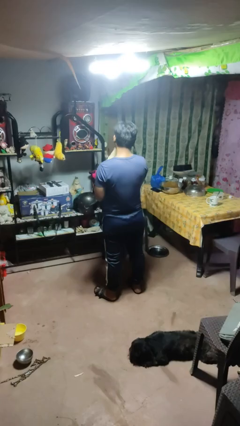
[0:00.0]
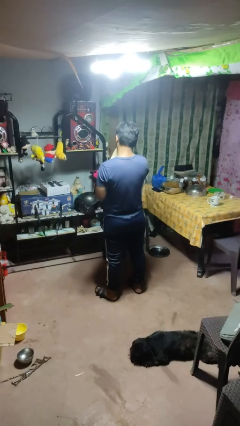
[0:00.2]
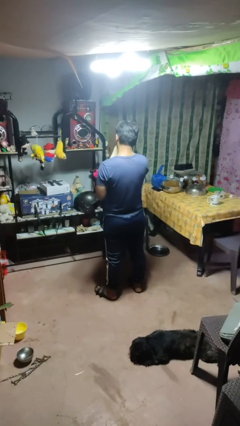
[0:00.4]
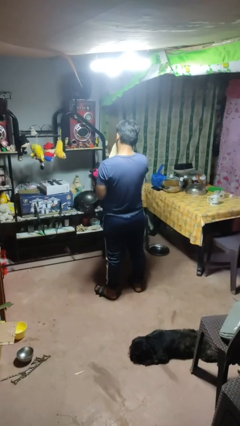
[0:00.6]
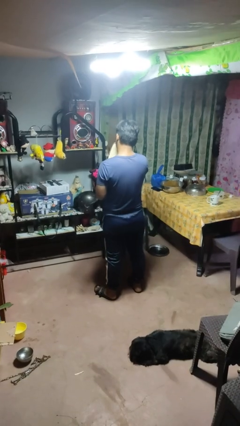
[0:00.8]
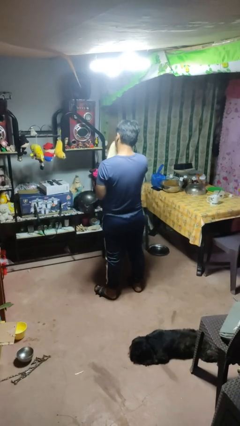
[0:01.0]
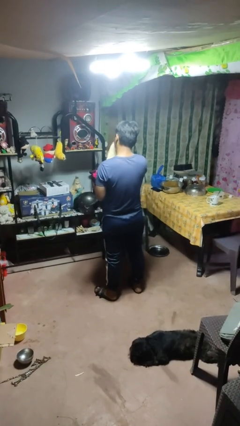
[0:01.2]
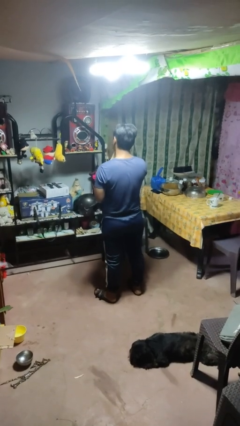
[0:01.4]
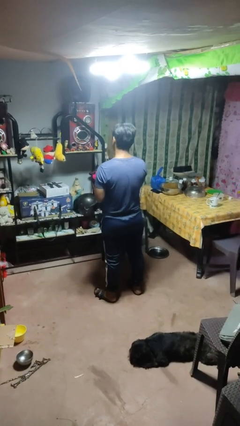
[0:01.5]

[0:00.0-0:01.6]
person blows nose

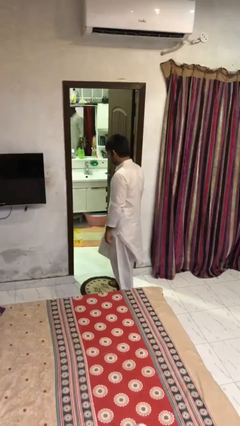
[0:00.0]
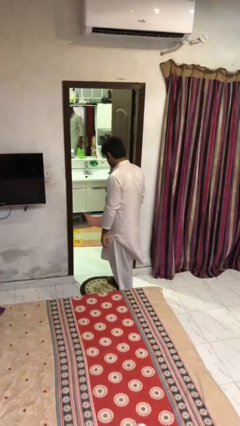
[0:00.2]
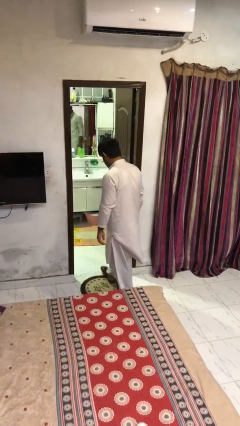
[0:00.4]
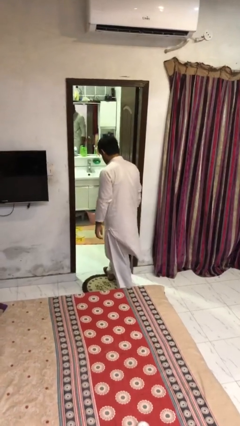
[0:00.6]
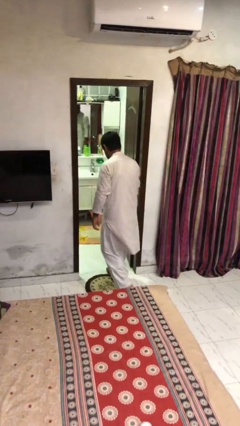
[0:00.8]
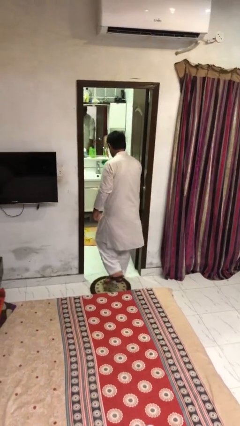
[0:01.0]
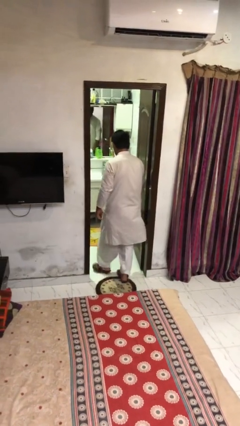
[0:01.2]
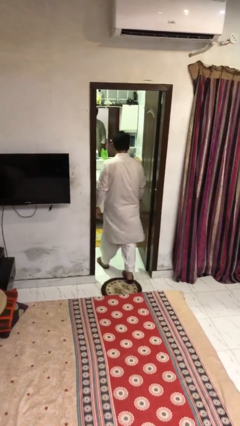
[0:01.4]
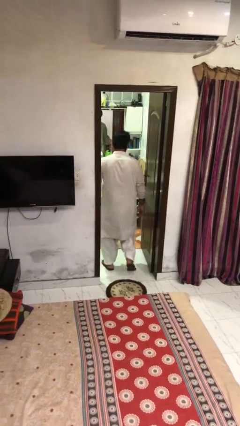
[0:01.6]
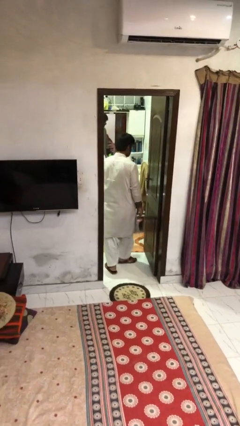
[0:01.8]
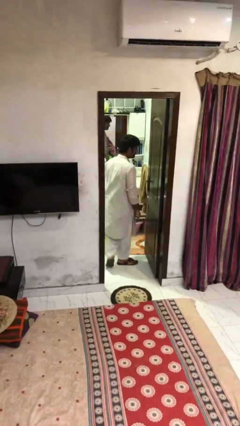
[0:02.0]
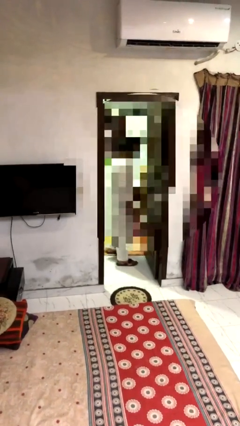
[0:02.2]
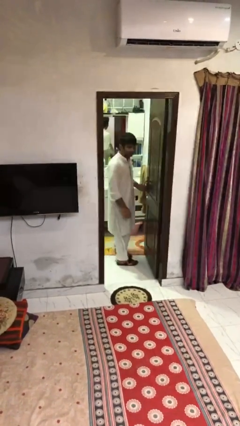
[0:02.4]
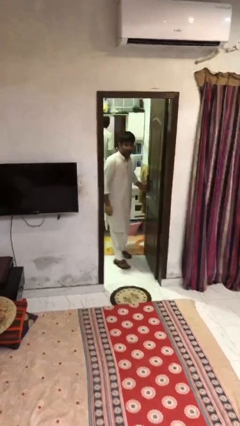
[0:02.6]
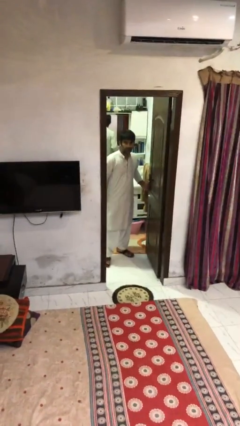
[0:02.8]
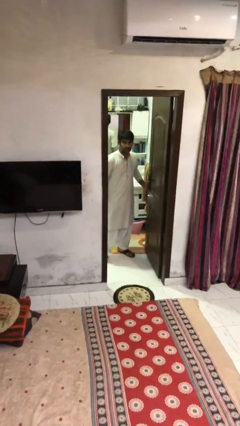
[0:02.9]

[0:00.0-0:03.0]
person exits scene through structure

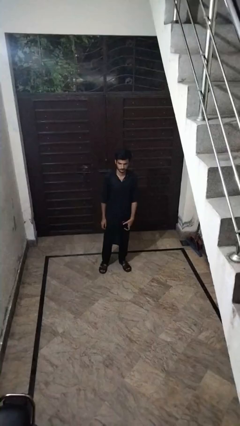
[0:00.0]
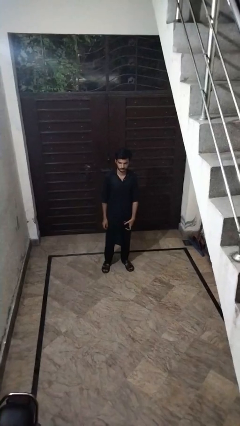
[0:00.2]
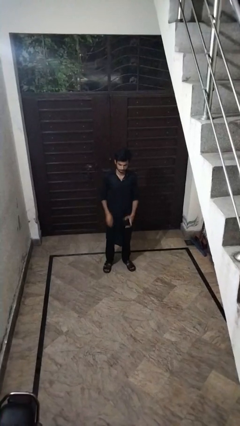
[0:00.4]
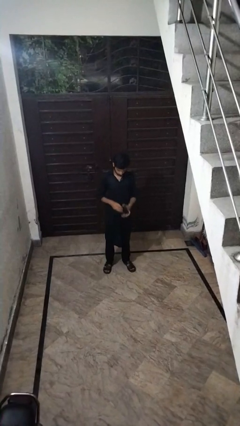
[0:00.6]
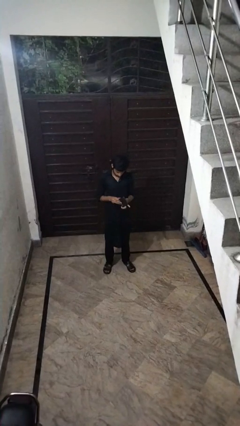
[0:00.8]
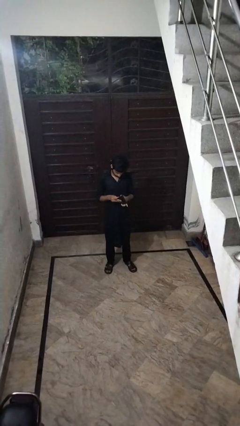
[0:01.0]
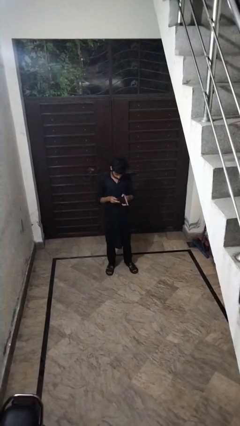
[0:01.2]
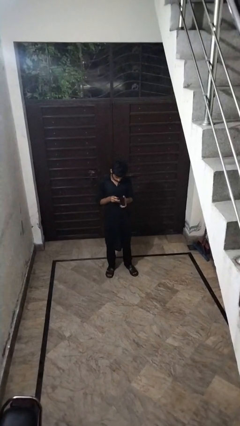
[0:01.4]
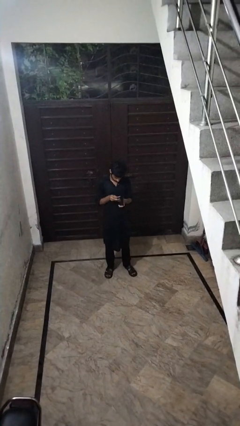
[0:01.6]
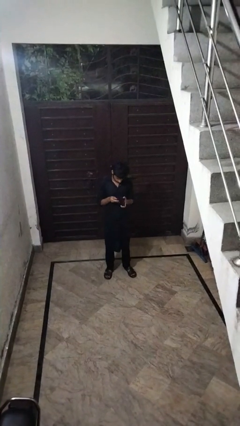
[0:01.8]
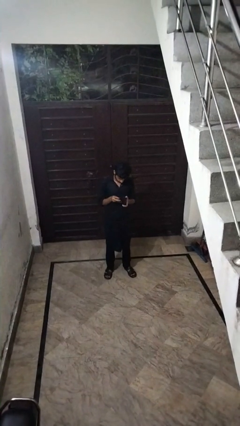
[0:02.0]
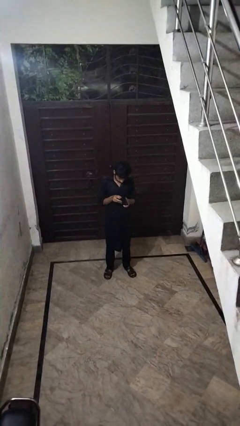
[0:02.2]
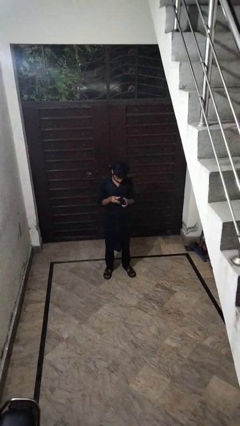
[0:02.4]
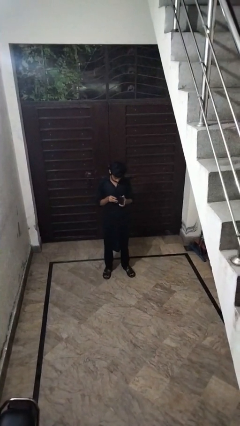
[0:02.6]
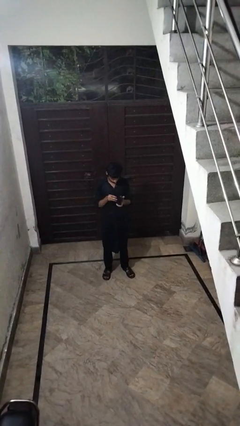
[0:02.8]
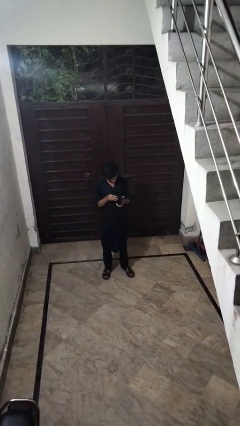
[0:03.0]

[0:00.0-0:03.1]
person searches in purse

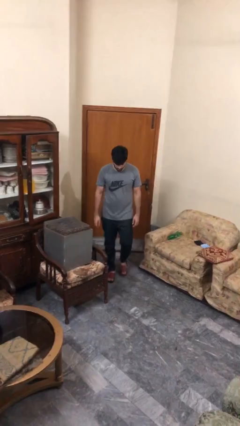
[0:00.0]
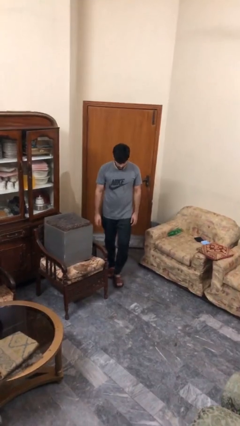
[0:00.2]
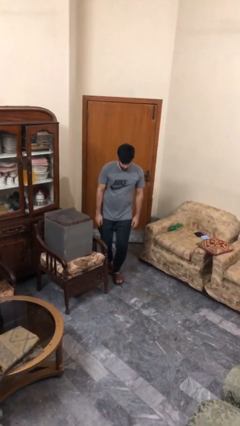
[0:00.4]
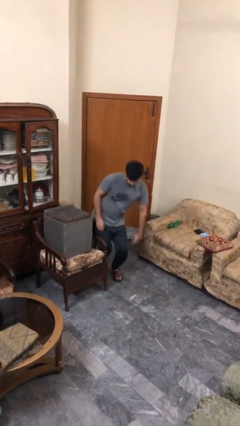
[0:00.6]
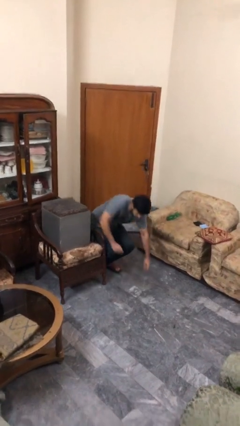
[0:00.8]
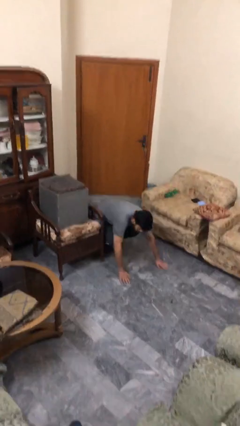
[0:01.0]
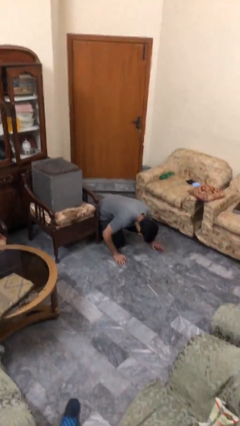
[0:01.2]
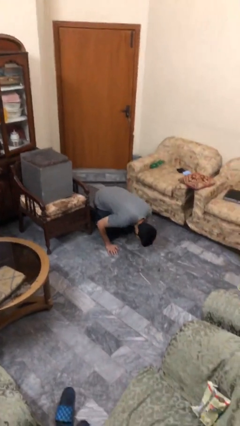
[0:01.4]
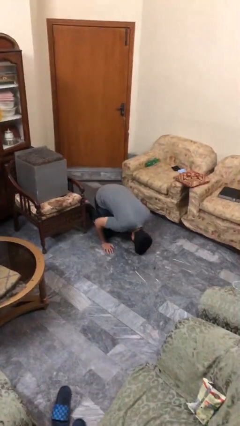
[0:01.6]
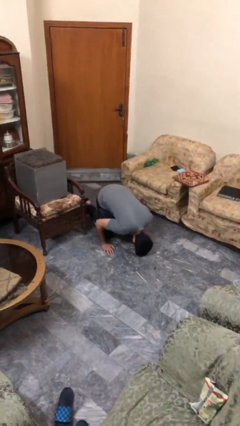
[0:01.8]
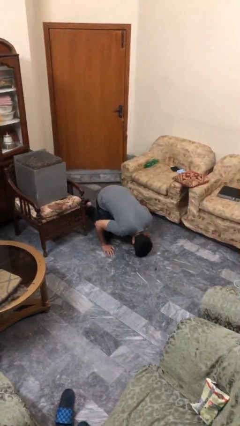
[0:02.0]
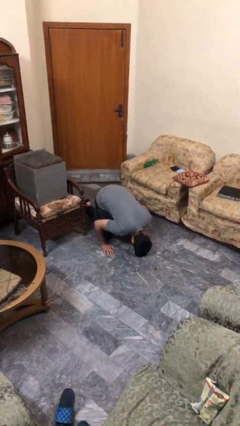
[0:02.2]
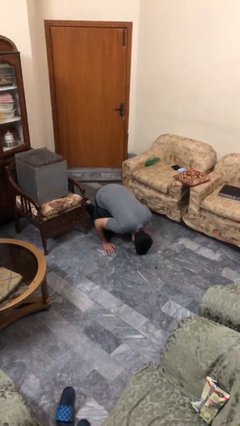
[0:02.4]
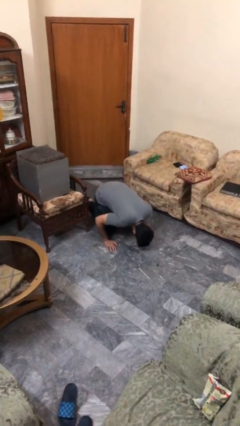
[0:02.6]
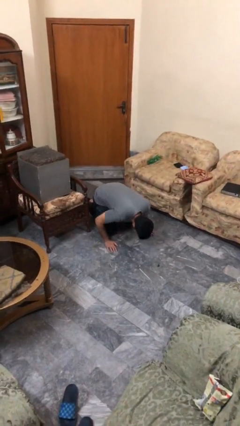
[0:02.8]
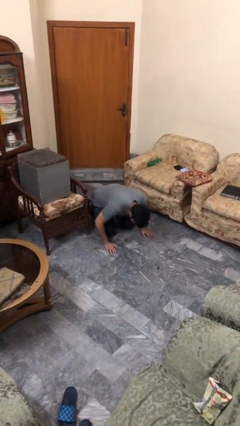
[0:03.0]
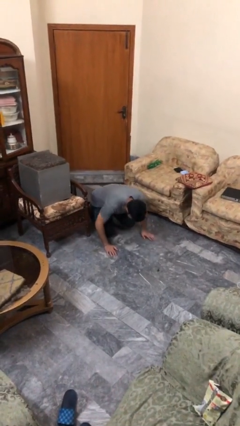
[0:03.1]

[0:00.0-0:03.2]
person trips on object on floor

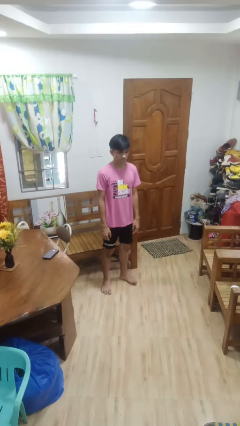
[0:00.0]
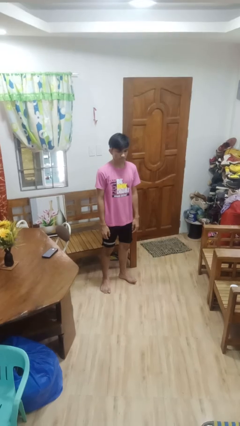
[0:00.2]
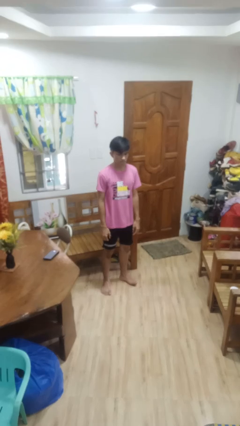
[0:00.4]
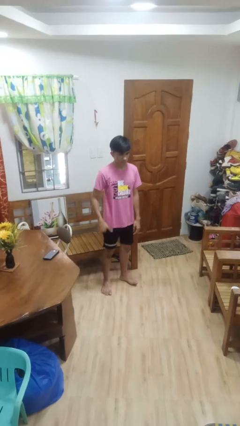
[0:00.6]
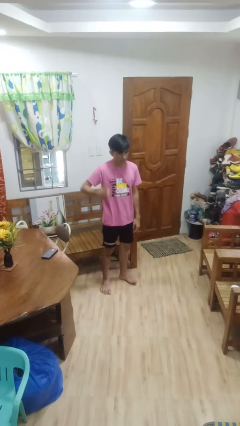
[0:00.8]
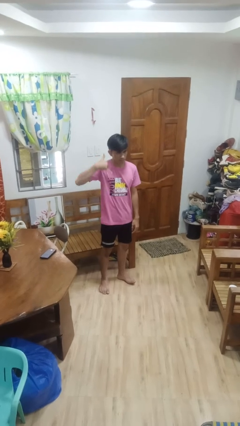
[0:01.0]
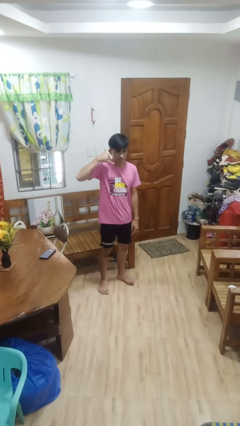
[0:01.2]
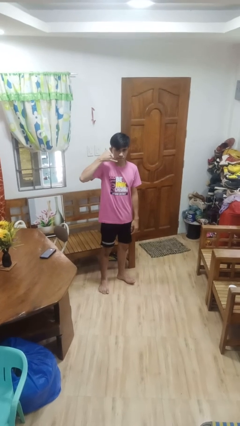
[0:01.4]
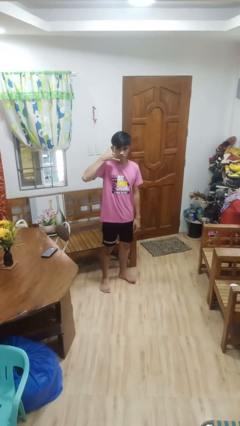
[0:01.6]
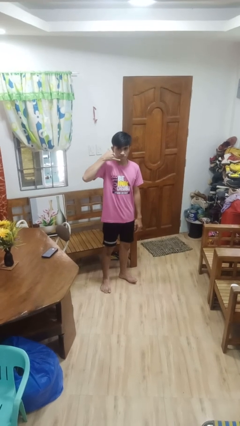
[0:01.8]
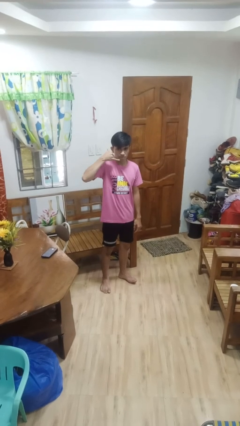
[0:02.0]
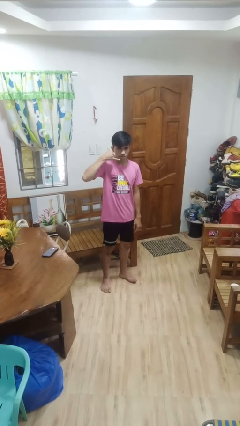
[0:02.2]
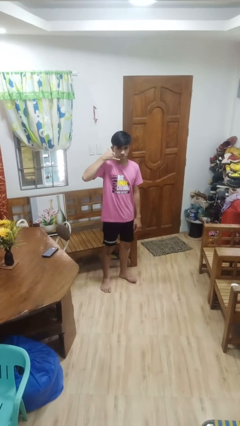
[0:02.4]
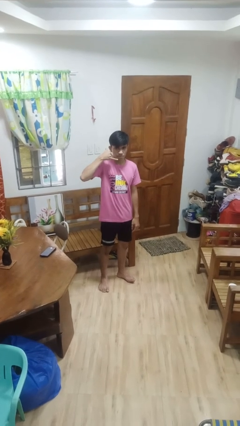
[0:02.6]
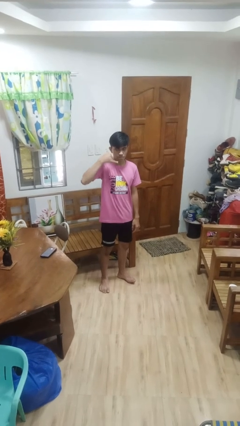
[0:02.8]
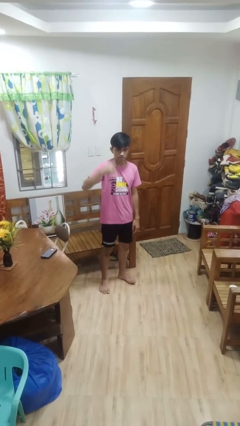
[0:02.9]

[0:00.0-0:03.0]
person gestures call me

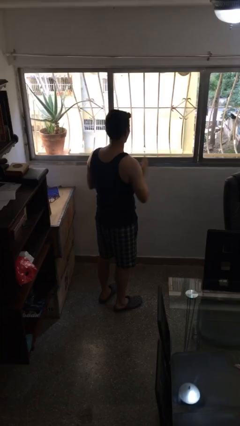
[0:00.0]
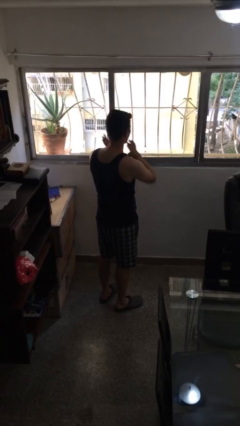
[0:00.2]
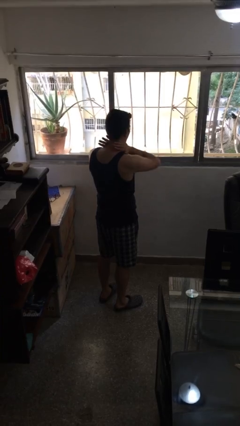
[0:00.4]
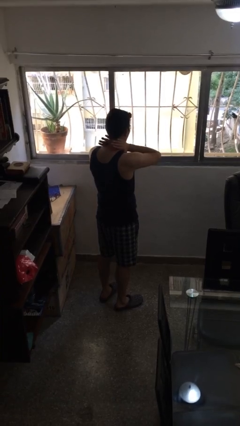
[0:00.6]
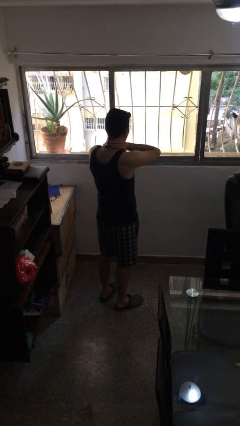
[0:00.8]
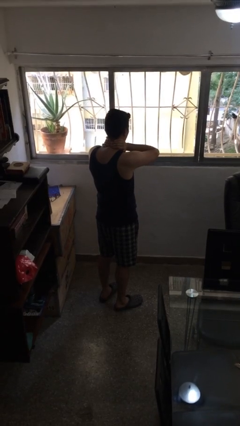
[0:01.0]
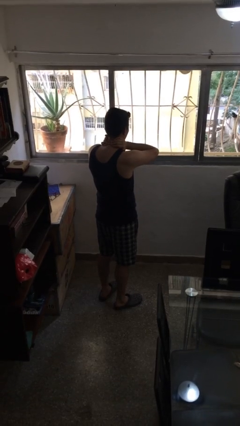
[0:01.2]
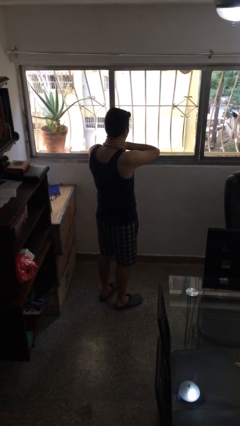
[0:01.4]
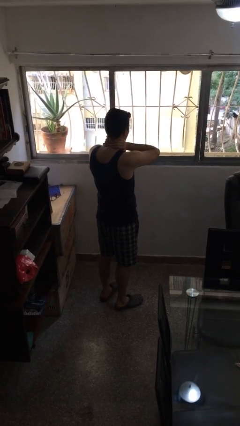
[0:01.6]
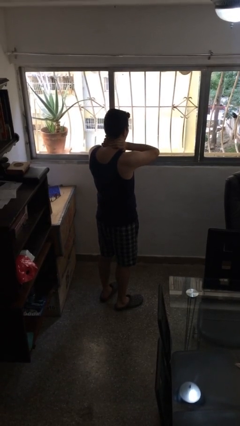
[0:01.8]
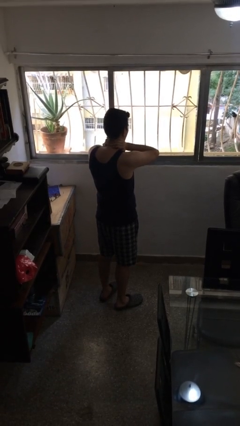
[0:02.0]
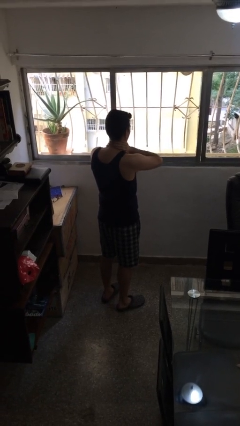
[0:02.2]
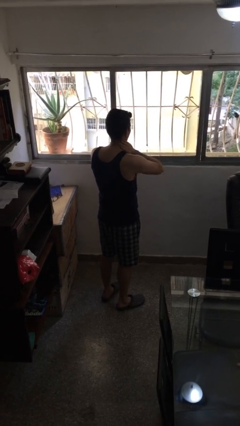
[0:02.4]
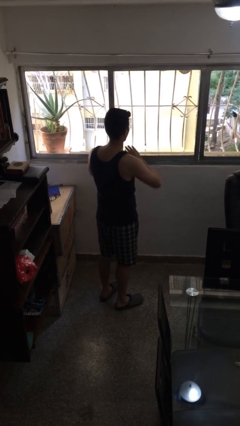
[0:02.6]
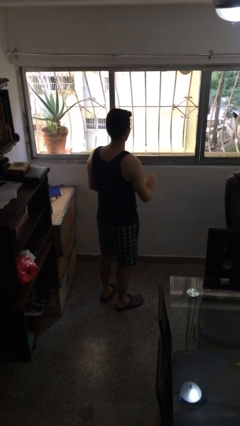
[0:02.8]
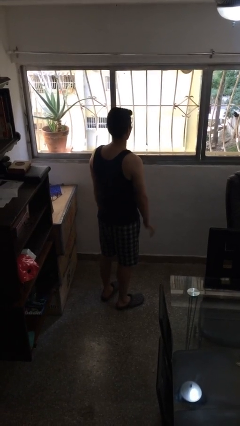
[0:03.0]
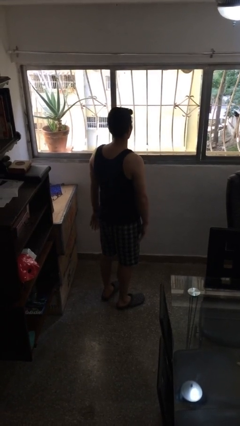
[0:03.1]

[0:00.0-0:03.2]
person rubs neck

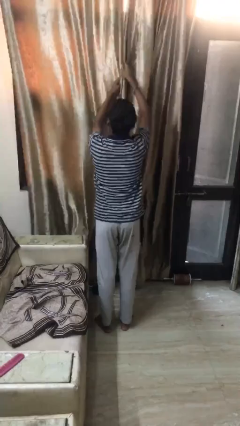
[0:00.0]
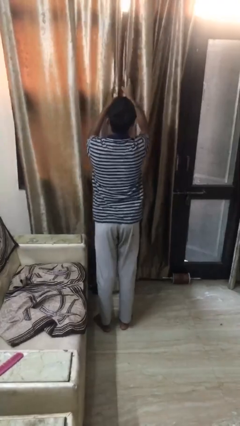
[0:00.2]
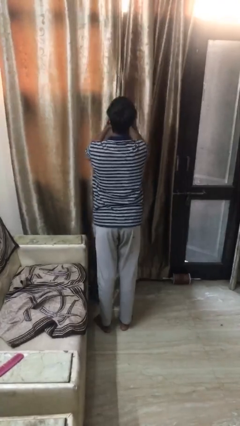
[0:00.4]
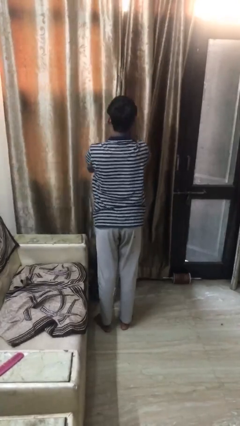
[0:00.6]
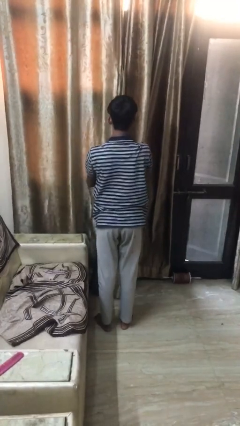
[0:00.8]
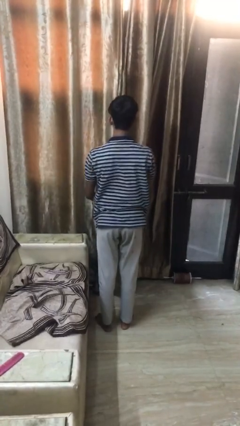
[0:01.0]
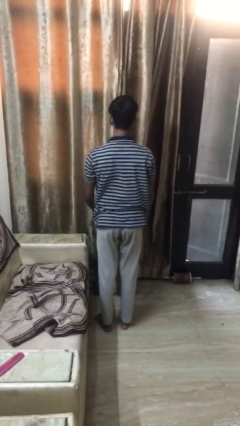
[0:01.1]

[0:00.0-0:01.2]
person closes curtains
